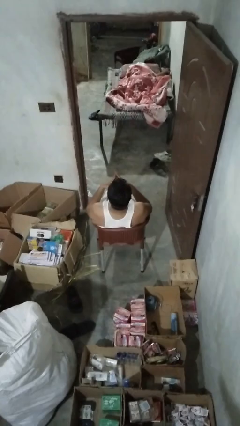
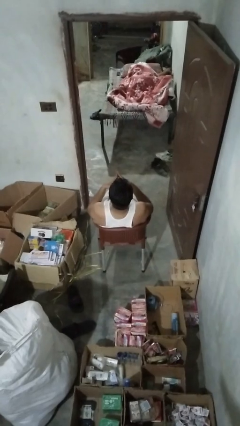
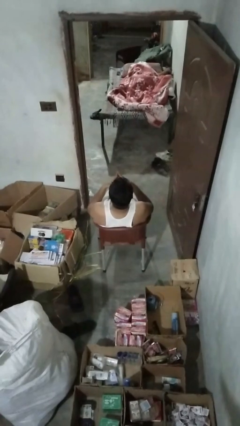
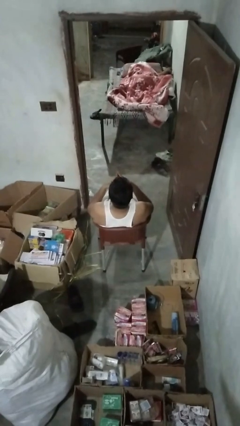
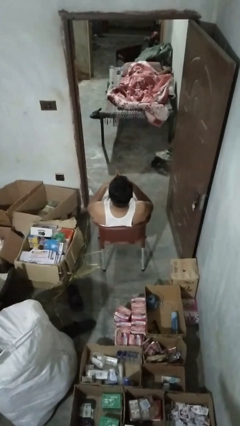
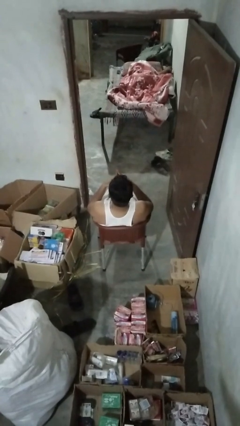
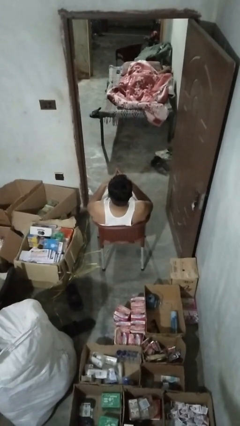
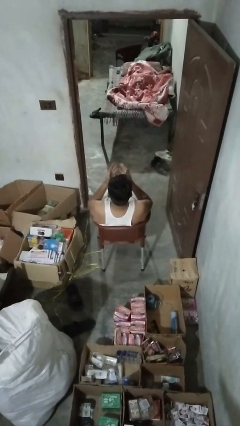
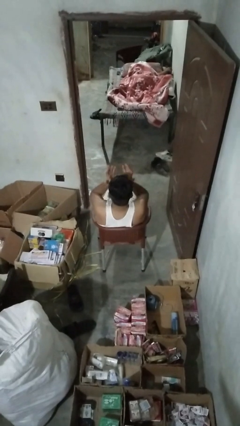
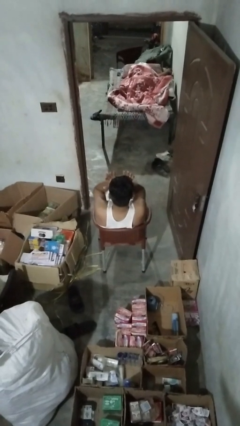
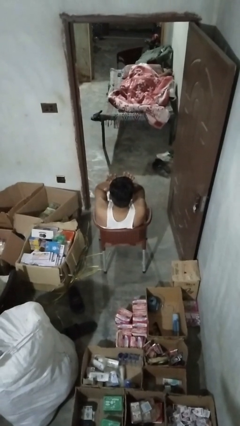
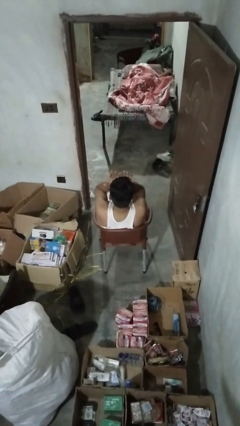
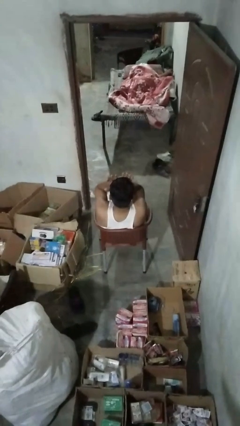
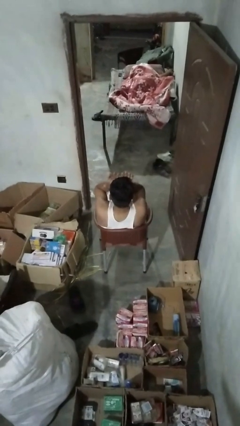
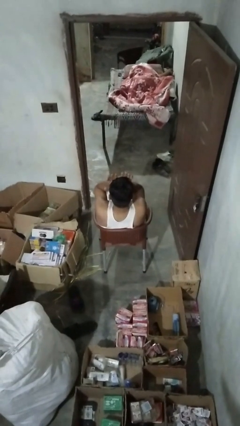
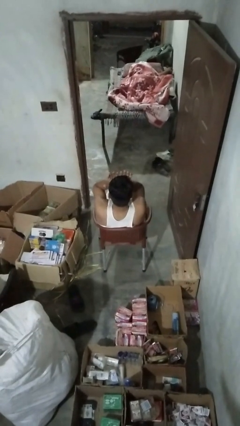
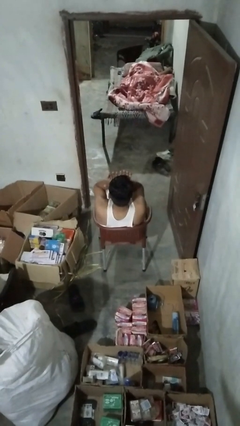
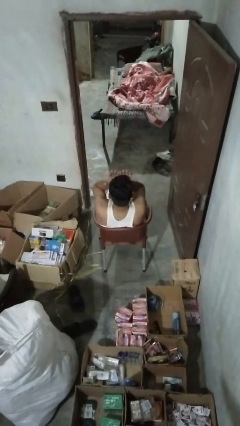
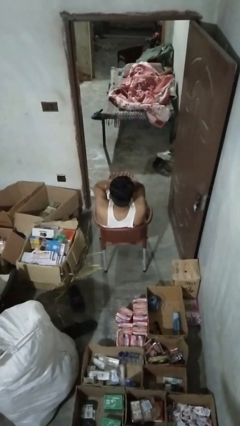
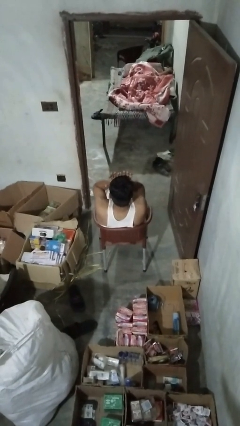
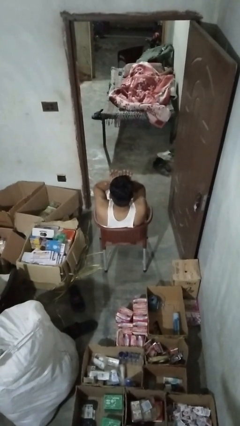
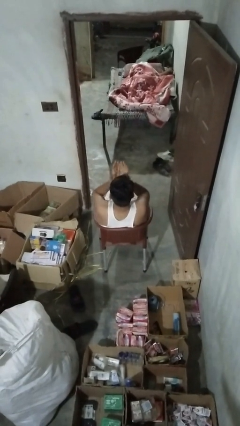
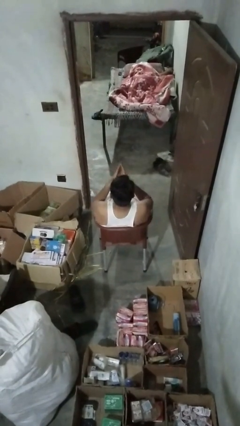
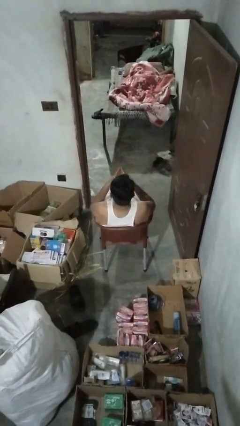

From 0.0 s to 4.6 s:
person rubs eyes

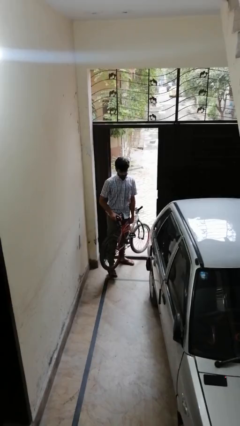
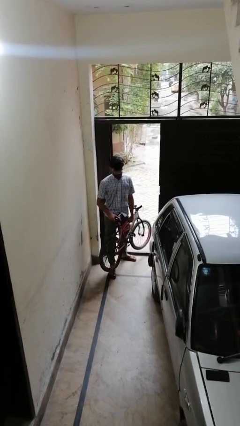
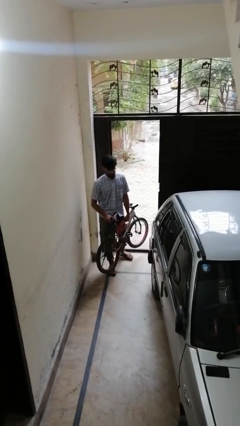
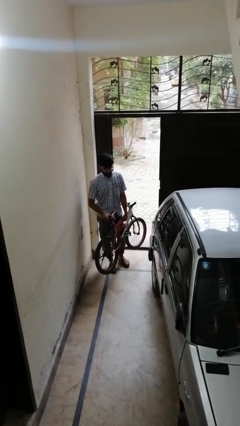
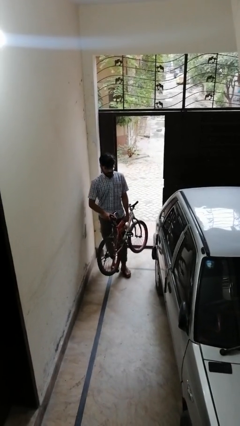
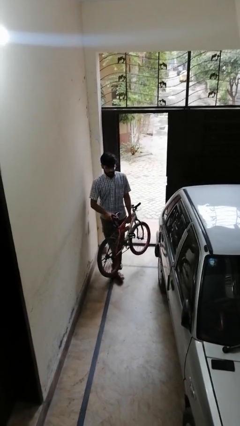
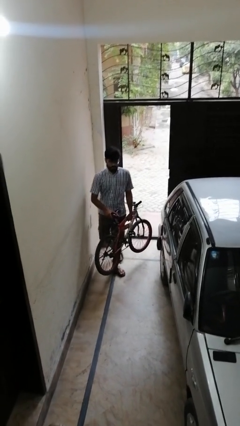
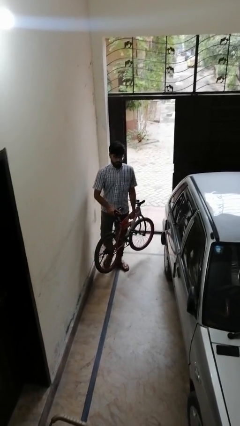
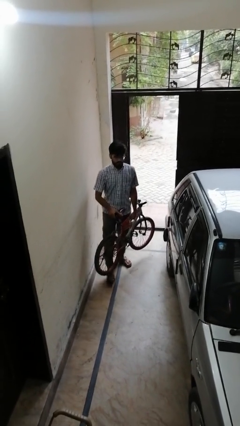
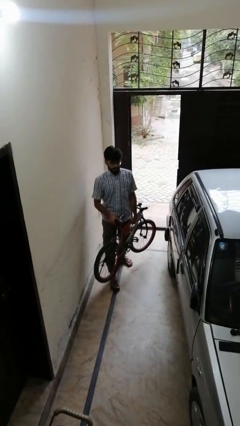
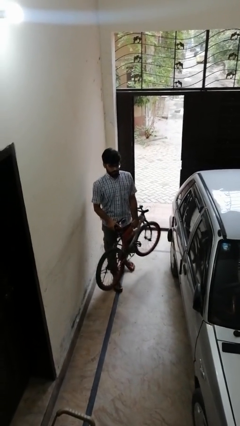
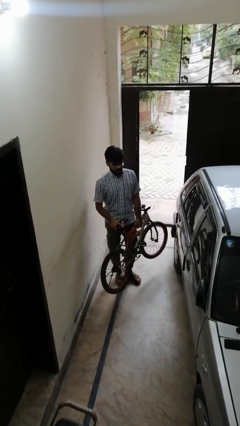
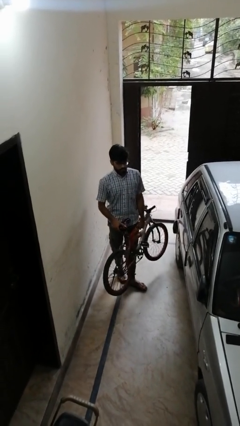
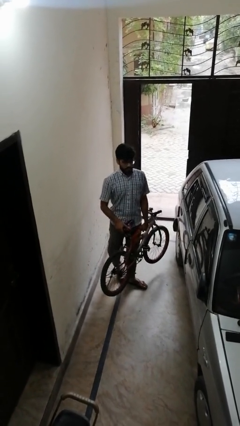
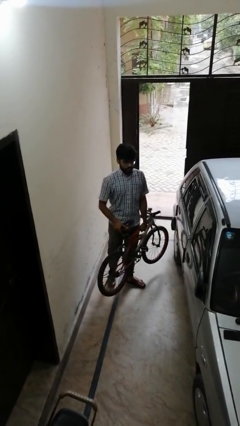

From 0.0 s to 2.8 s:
person carries bicycle

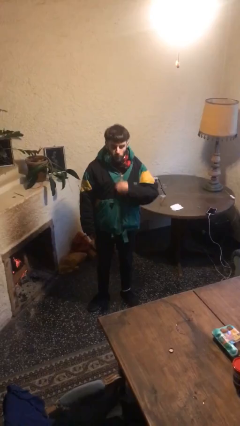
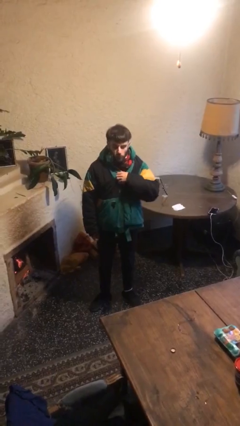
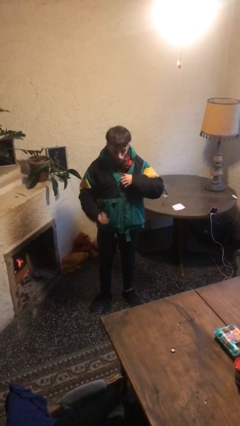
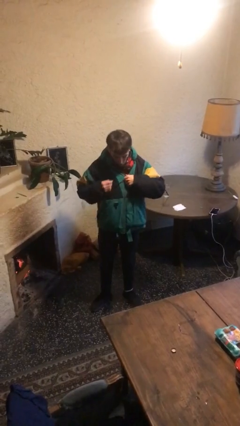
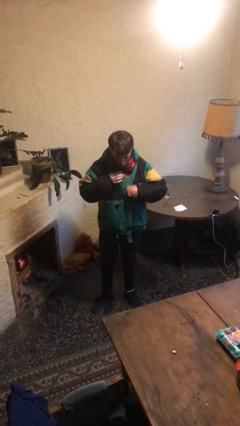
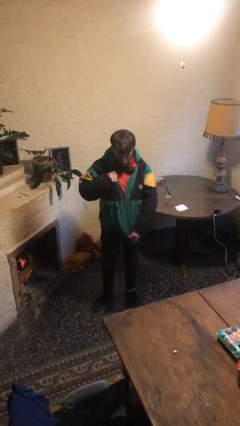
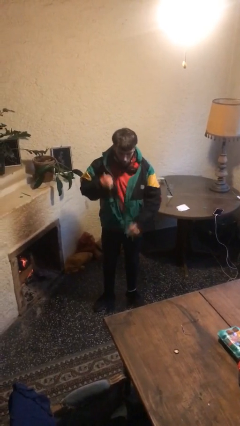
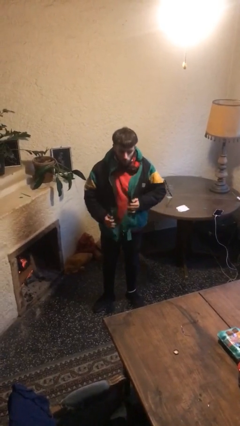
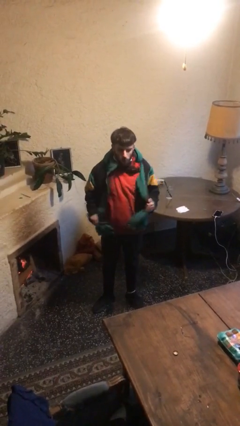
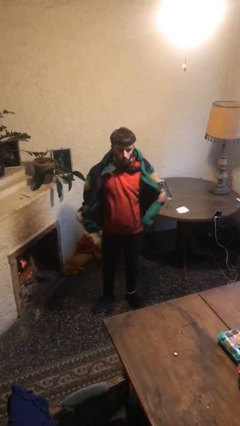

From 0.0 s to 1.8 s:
person unzips jacket

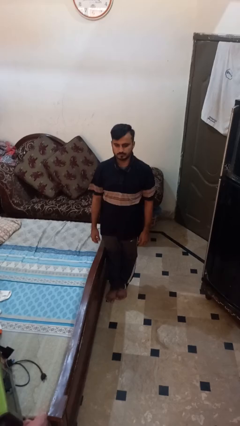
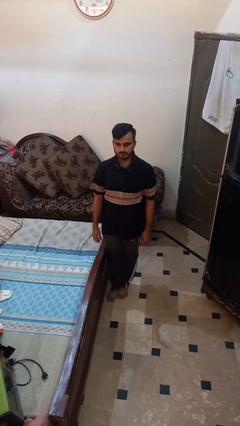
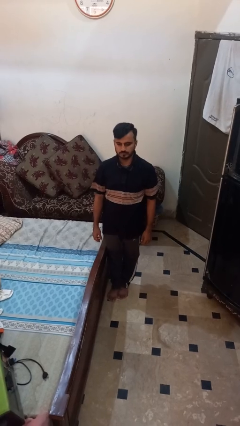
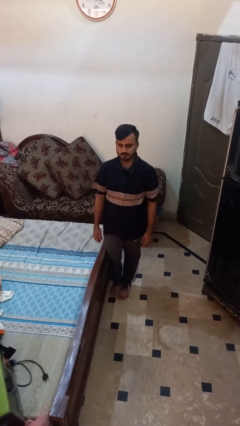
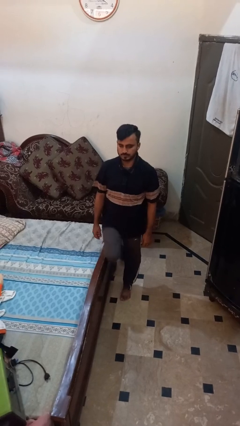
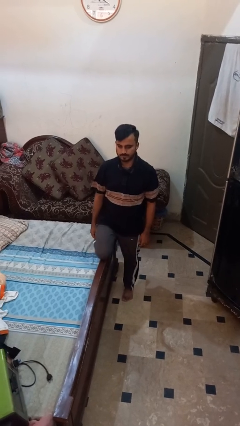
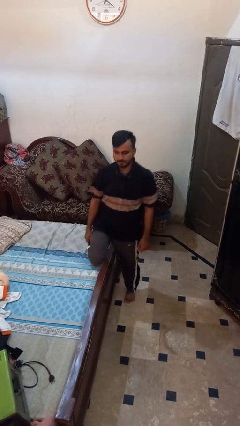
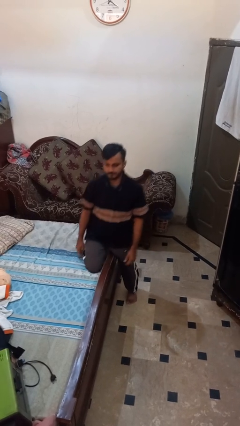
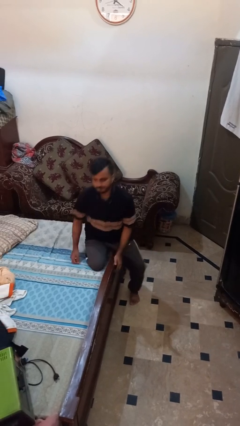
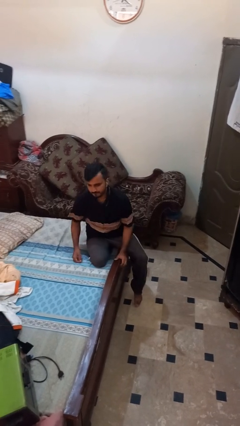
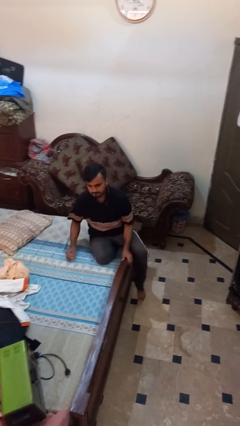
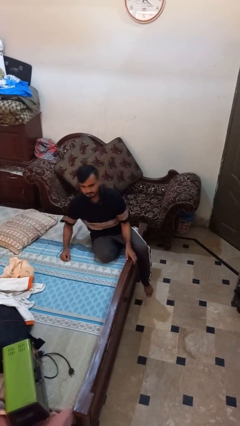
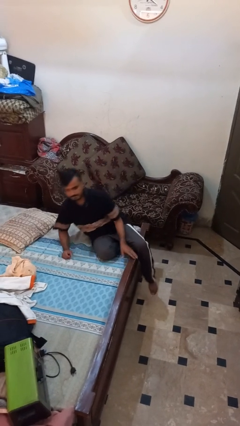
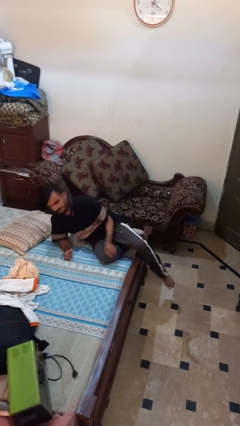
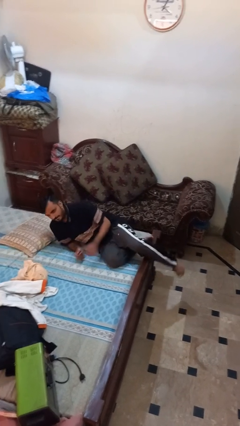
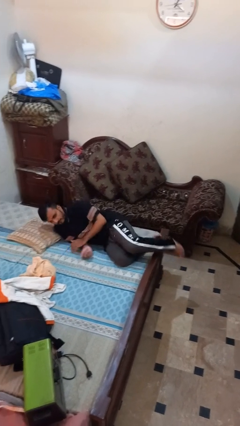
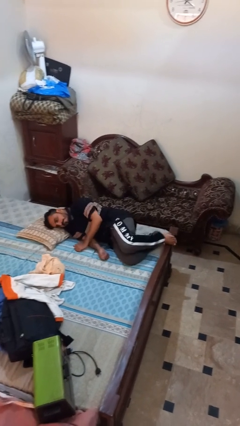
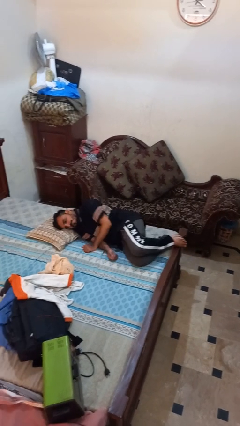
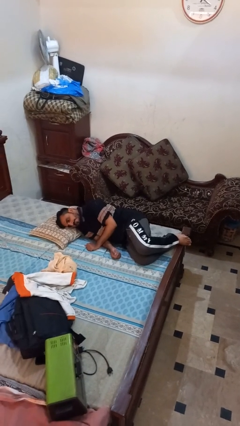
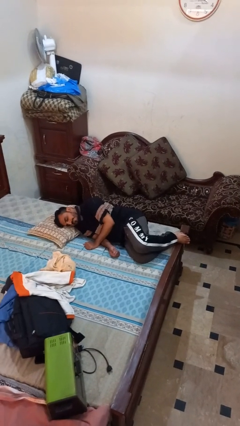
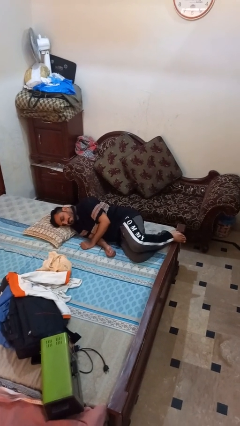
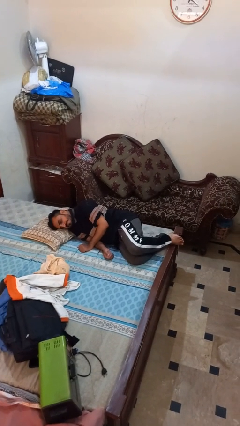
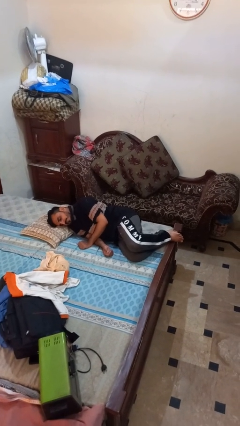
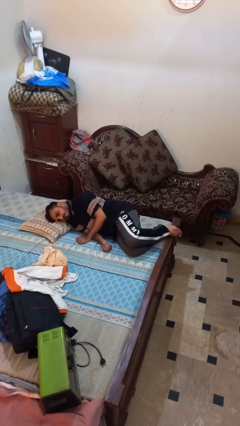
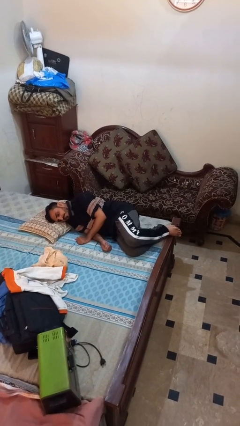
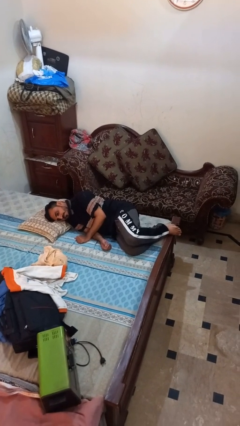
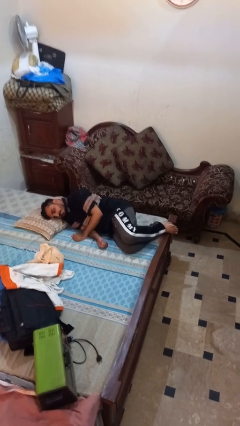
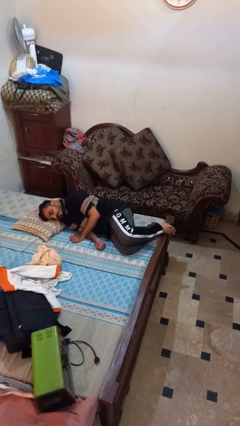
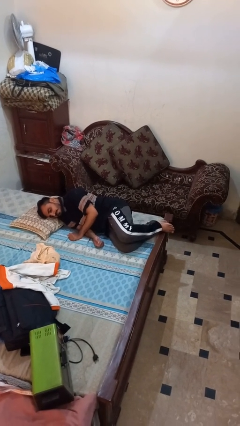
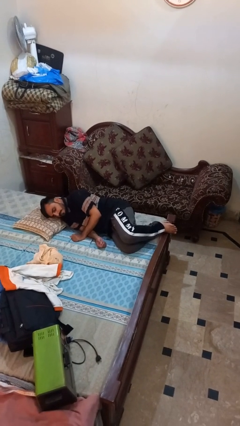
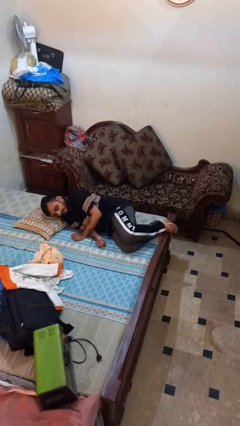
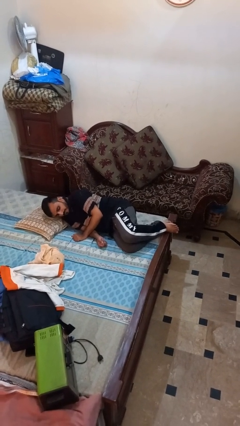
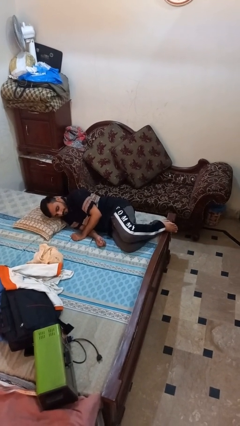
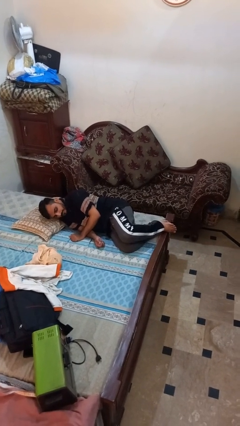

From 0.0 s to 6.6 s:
person lies down on bed

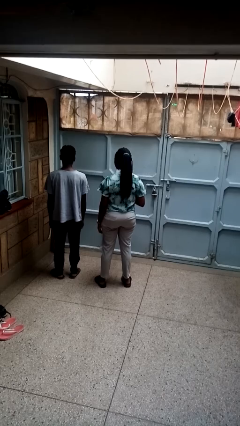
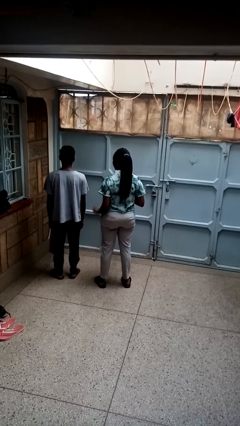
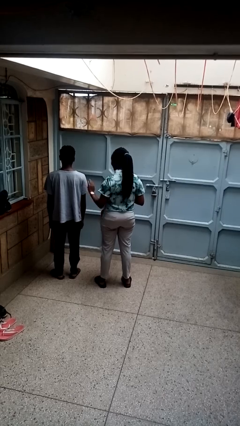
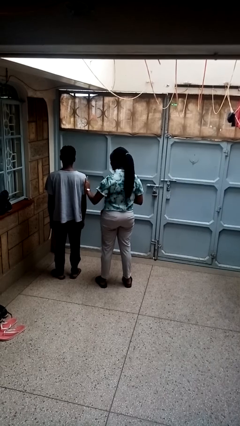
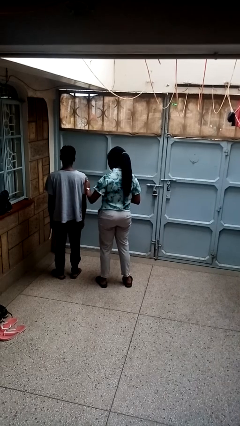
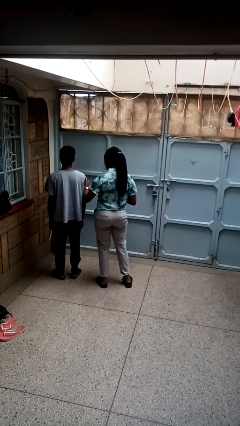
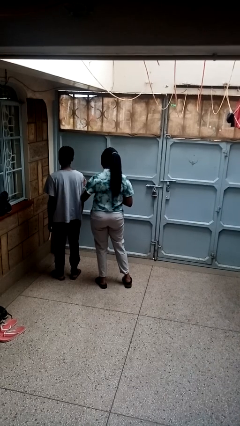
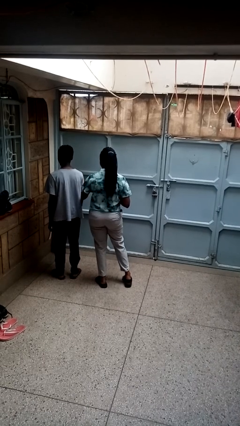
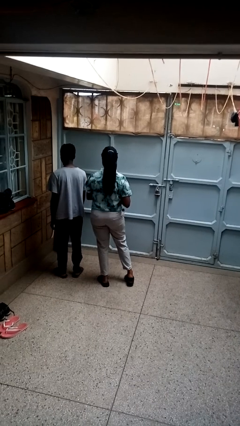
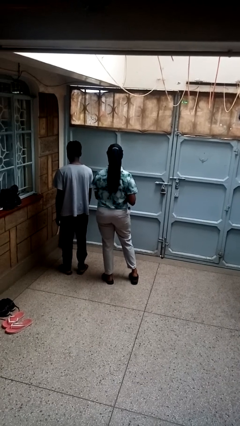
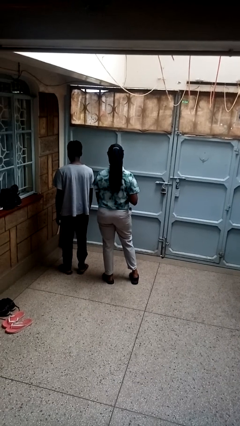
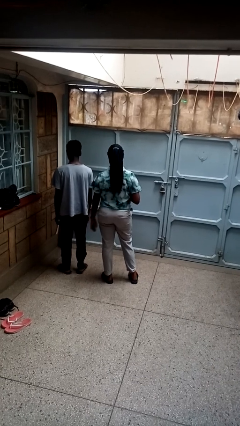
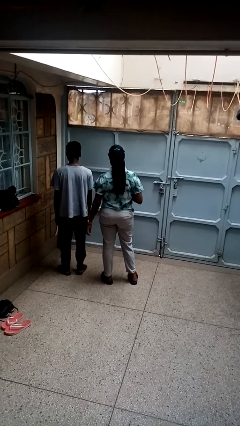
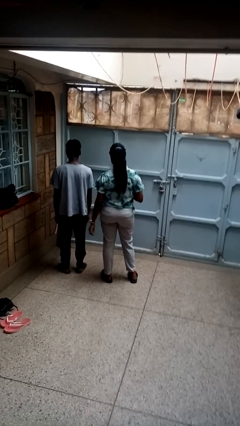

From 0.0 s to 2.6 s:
person shoves person
